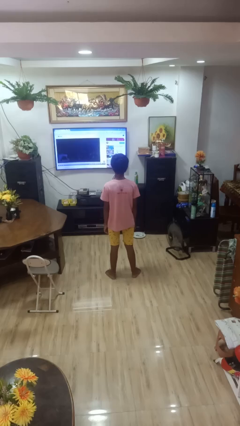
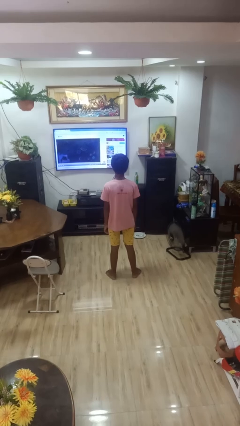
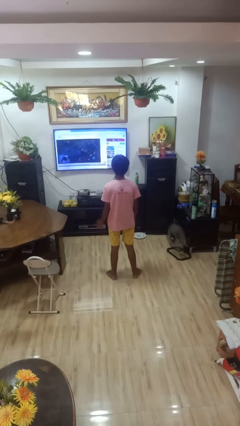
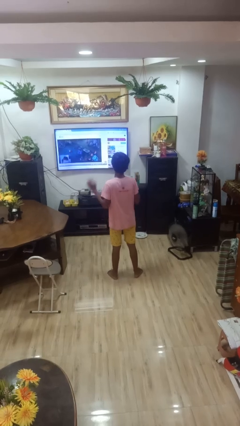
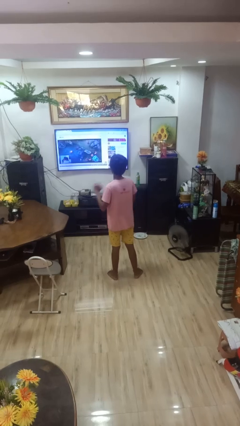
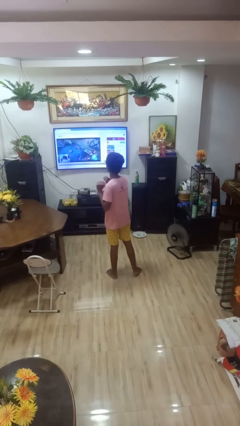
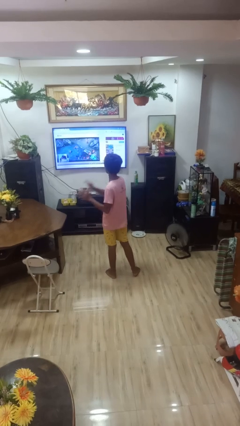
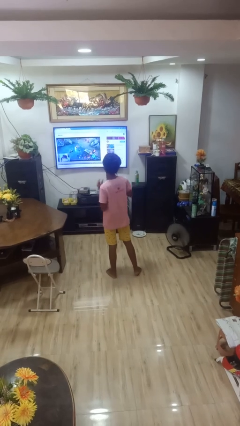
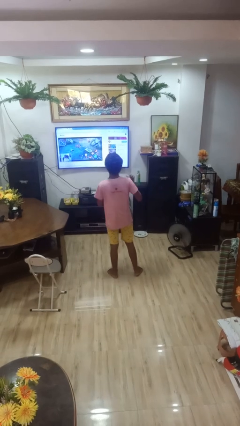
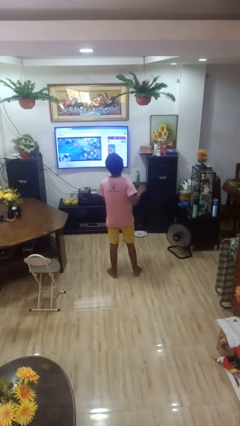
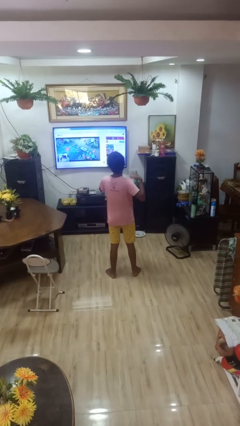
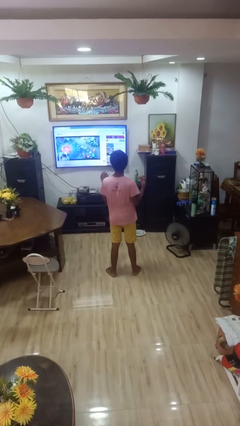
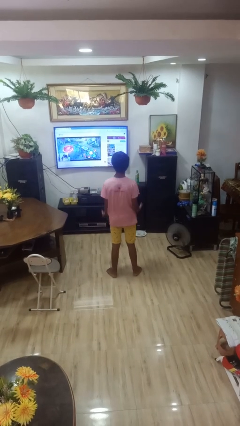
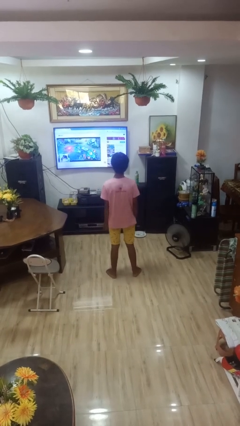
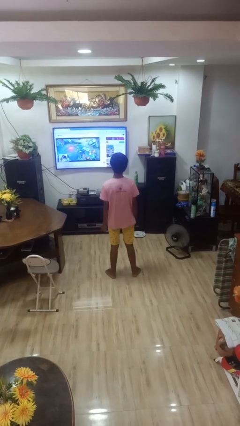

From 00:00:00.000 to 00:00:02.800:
person dances in place

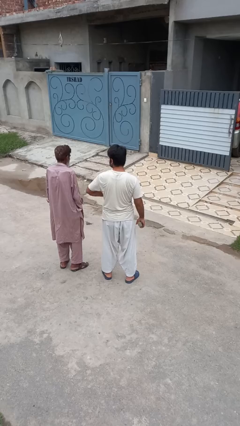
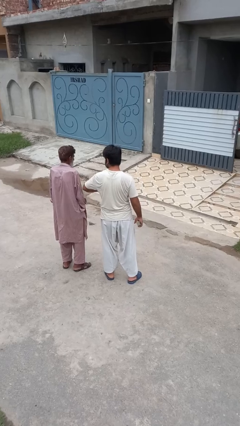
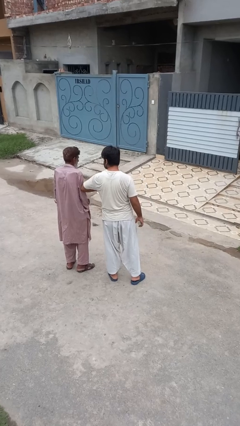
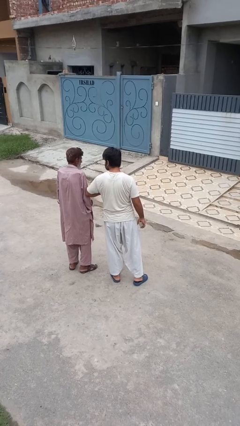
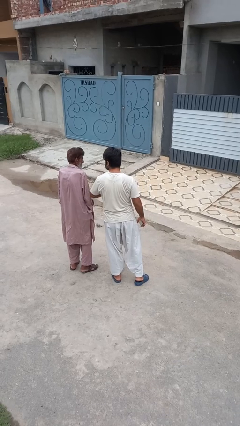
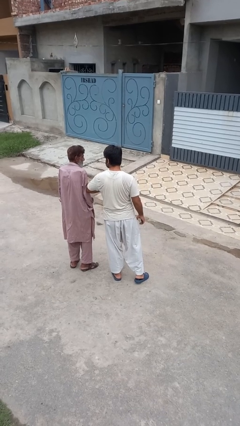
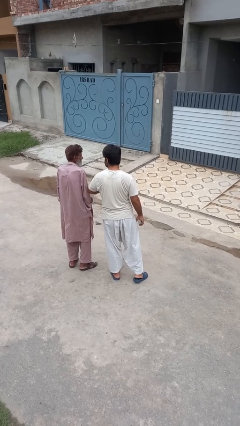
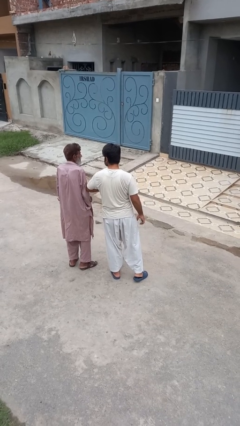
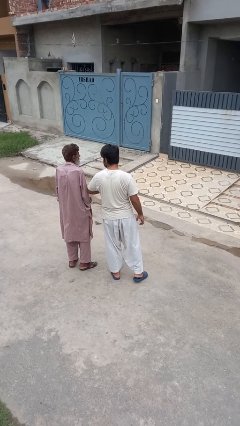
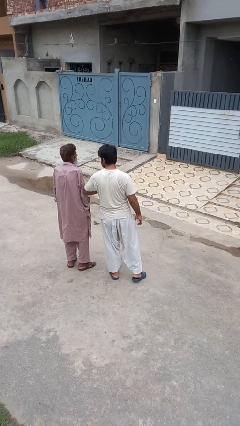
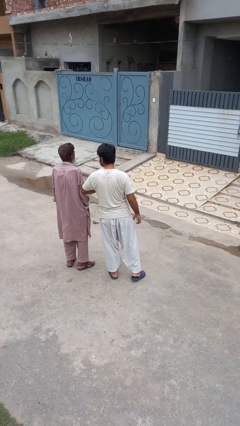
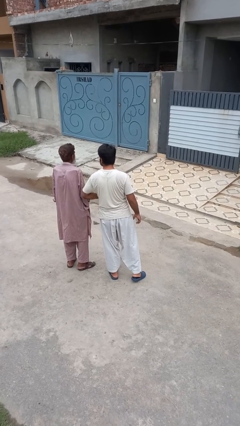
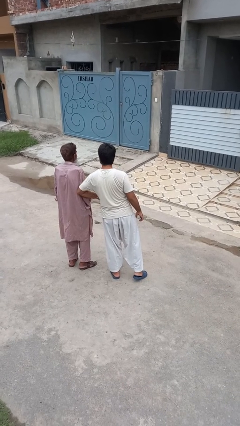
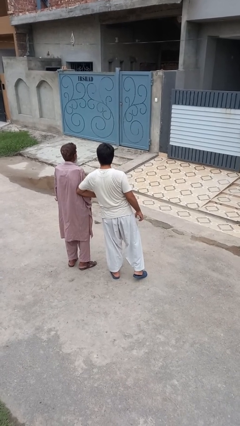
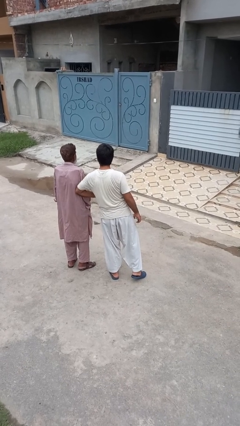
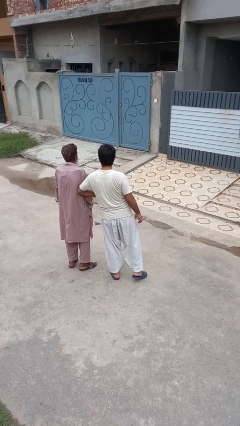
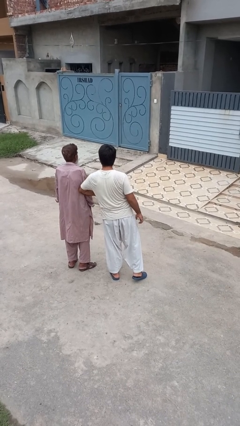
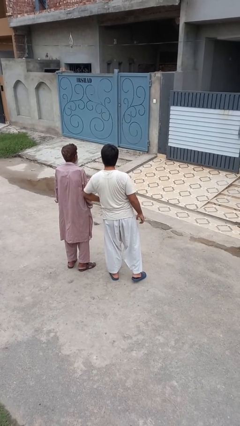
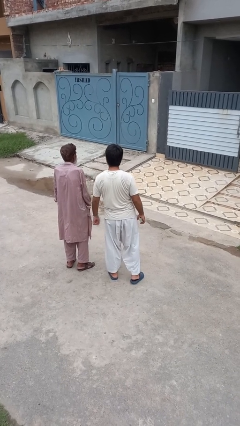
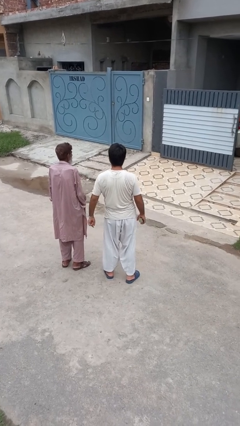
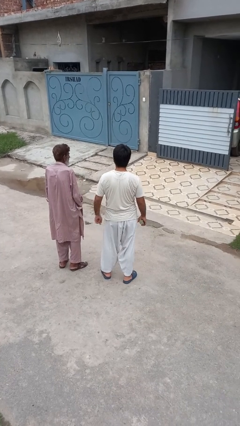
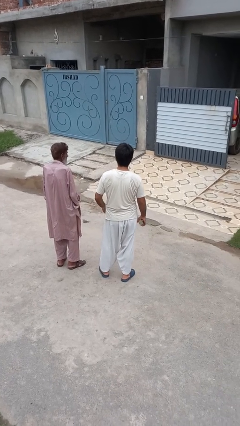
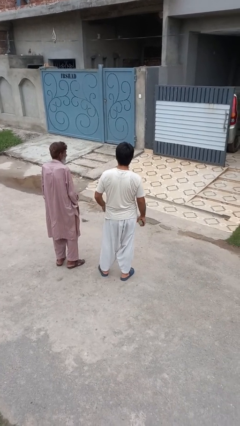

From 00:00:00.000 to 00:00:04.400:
person nudges person with elbow

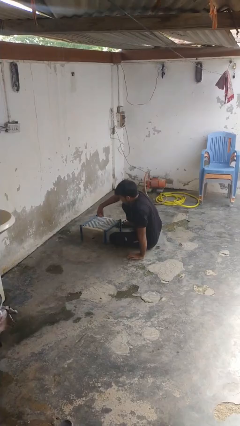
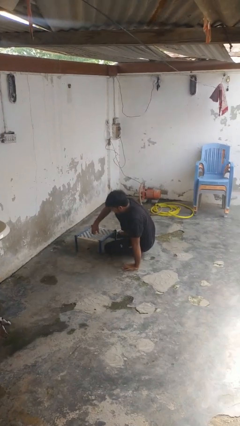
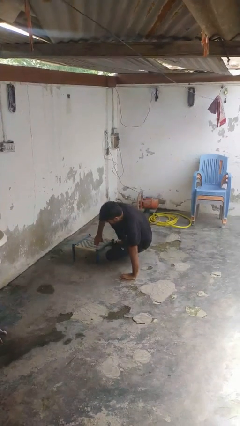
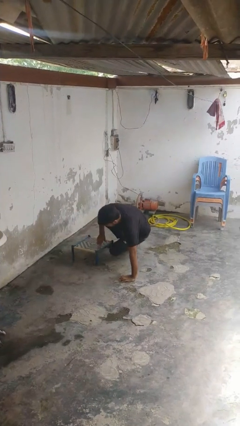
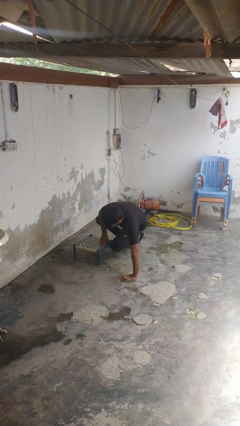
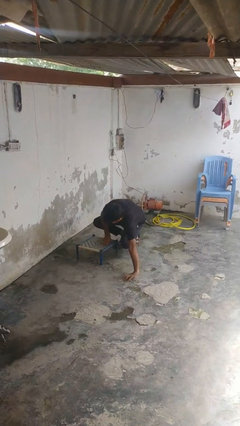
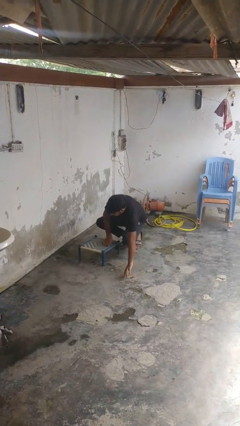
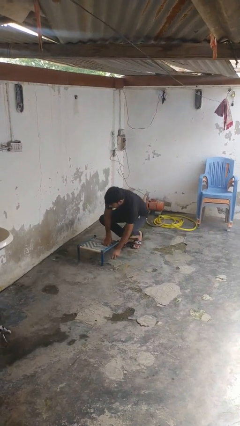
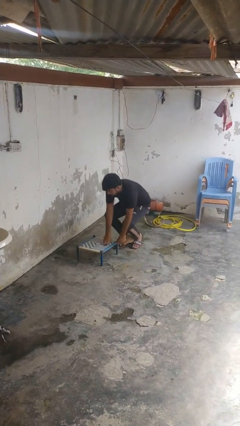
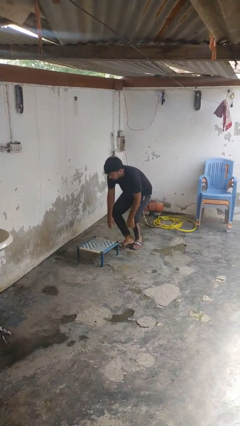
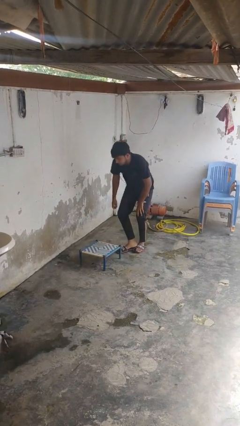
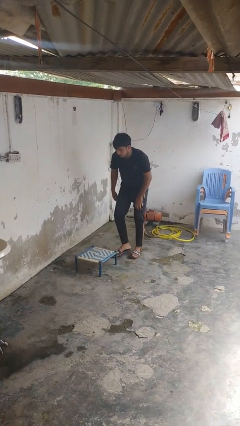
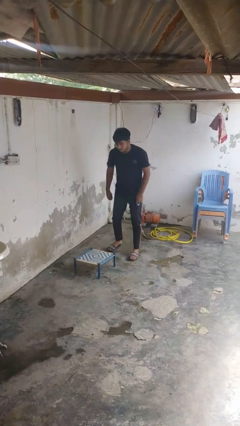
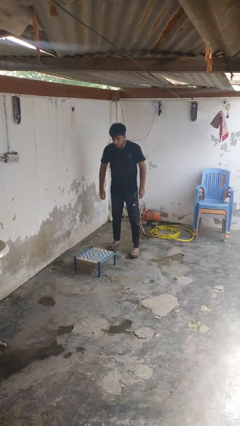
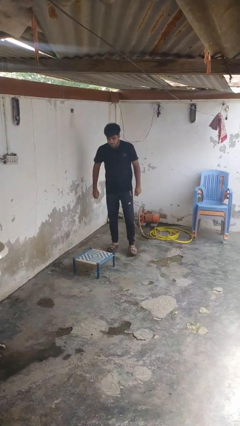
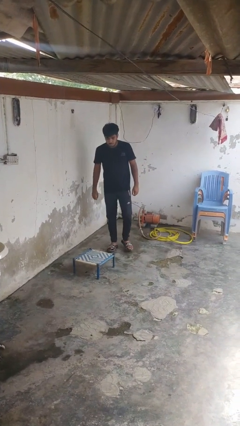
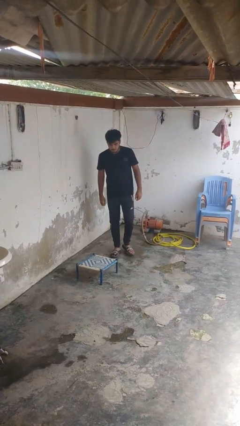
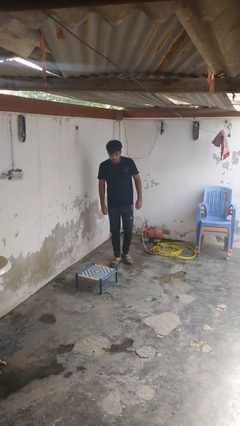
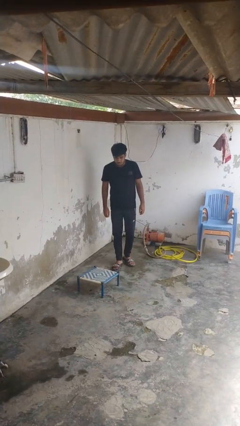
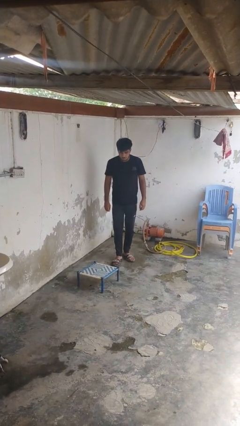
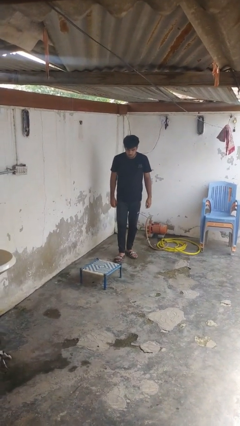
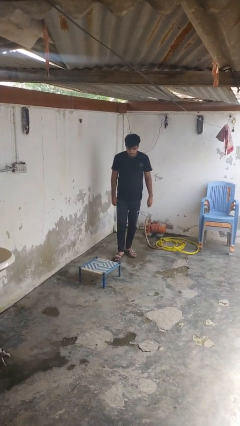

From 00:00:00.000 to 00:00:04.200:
person stands up from floor

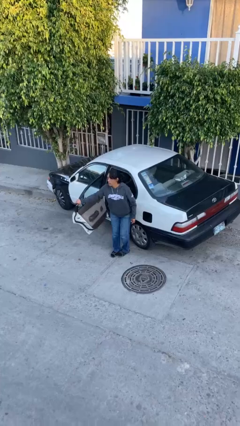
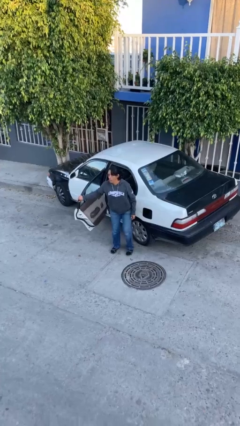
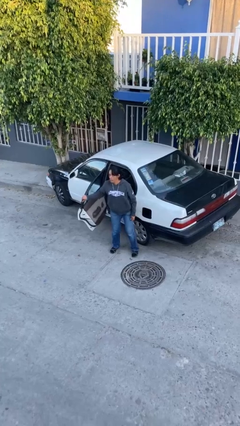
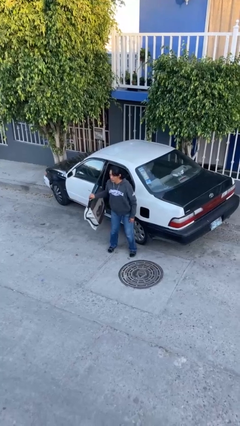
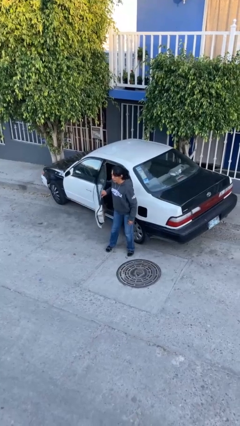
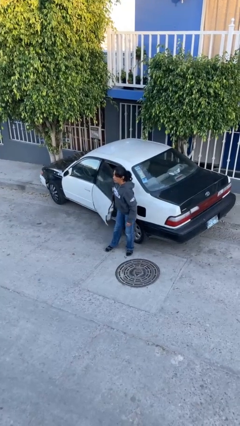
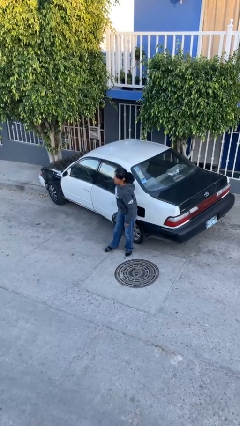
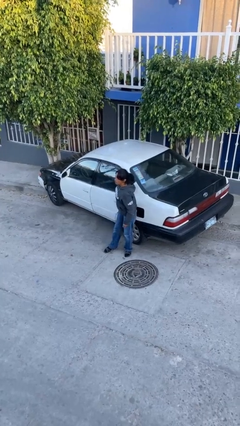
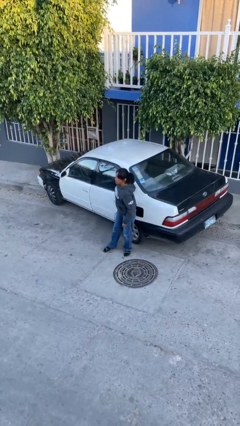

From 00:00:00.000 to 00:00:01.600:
person closes car door

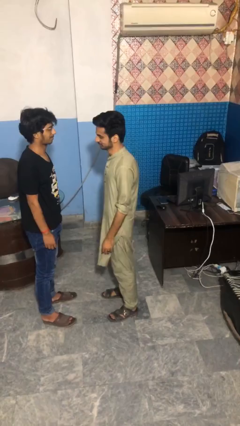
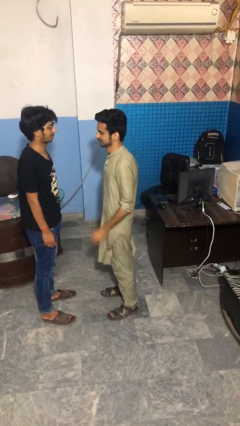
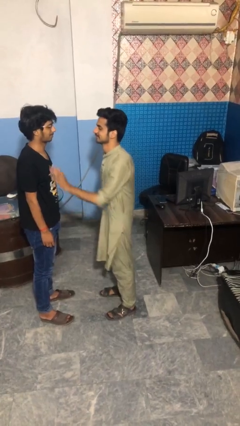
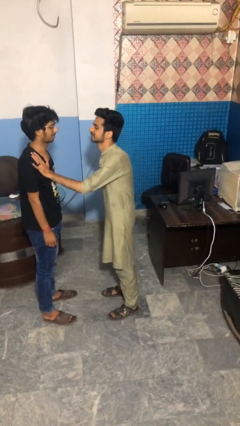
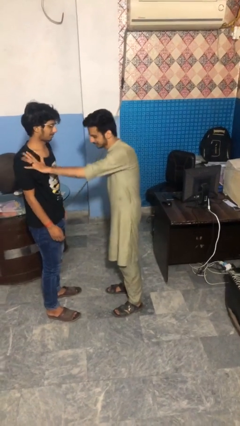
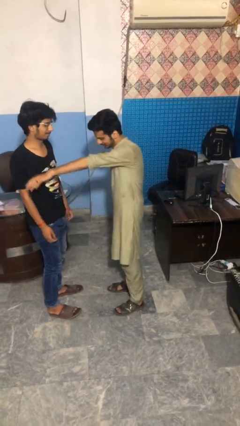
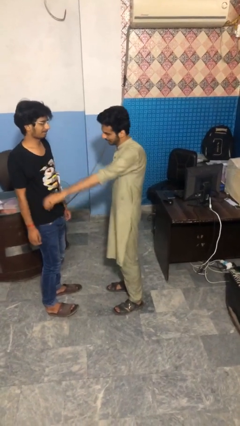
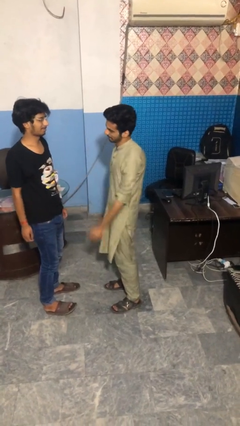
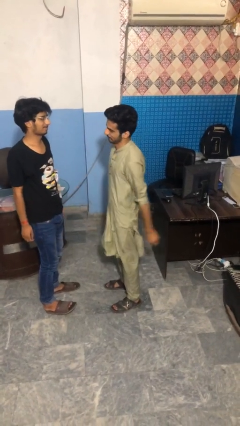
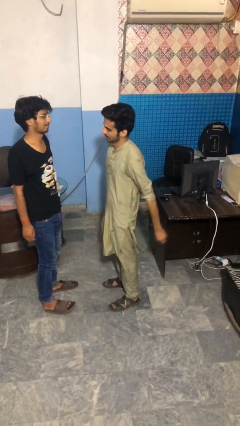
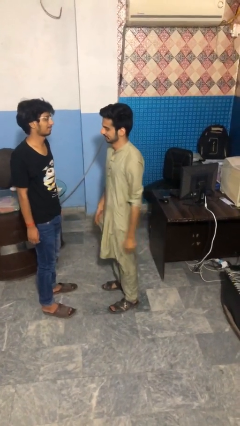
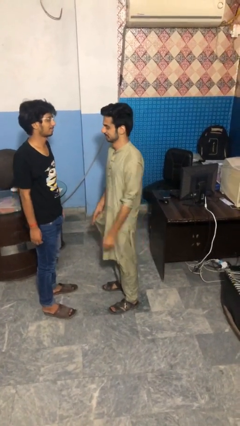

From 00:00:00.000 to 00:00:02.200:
person shoves person

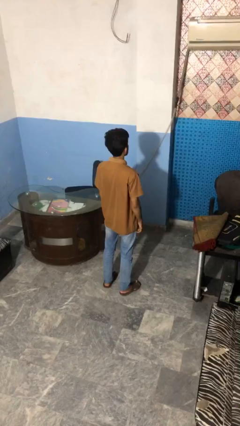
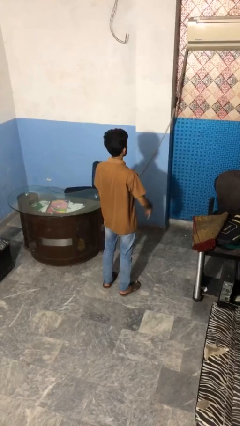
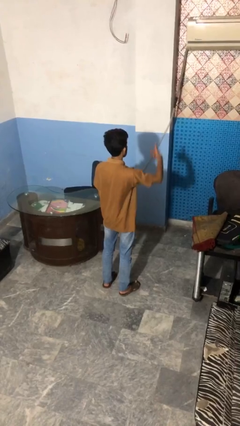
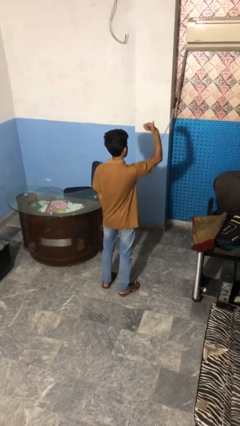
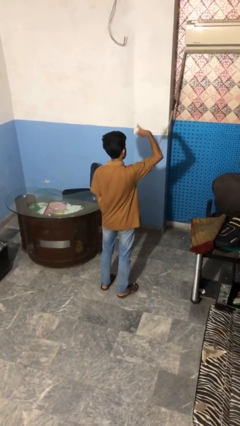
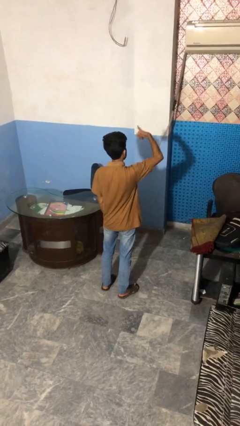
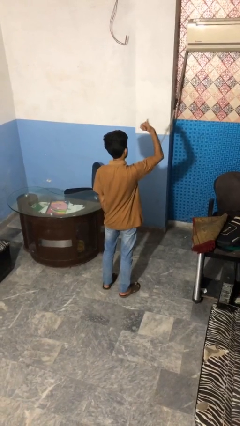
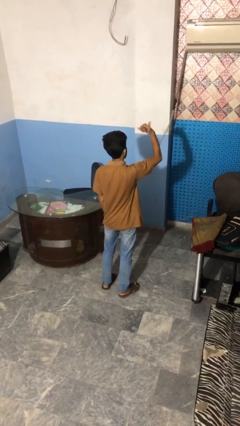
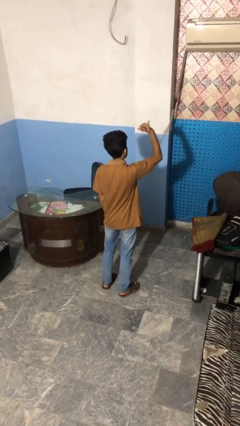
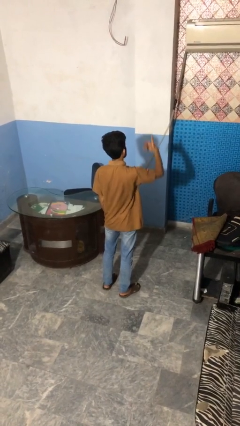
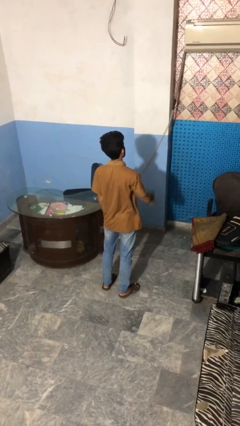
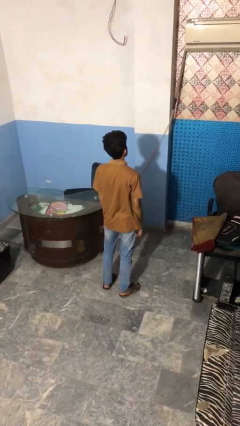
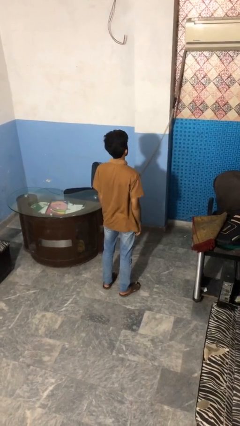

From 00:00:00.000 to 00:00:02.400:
person gestures hang loose
